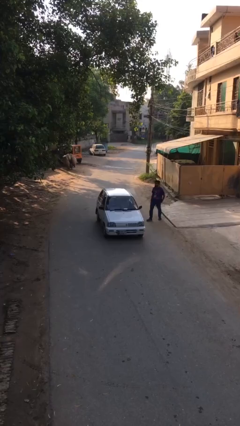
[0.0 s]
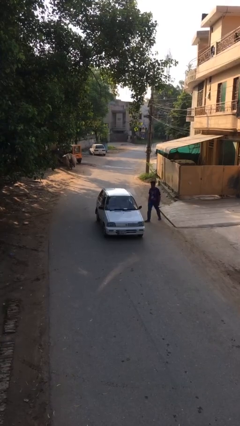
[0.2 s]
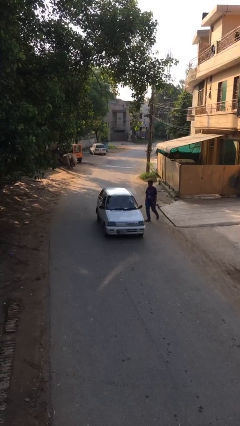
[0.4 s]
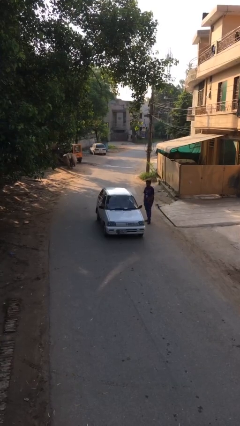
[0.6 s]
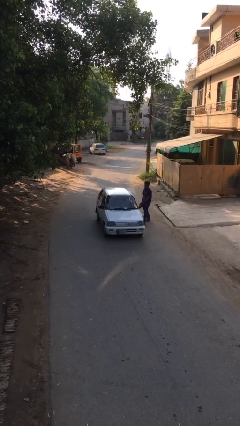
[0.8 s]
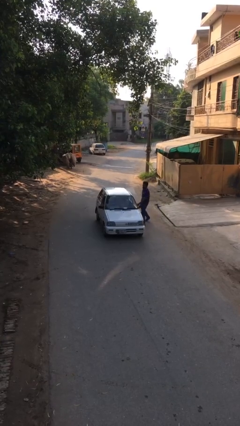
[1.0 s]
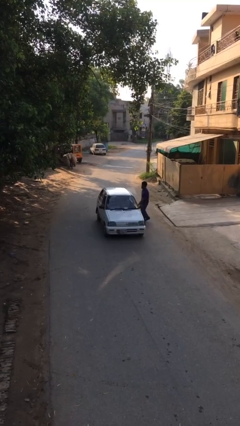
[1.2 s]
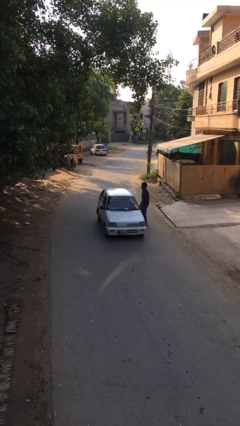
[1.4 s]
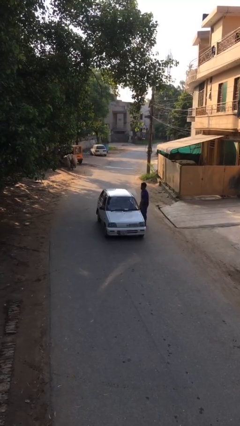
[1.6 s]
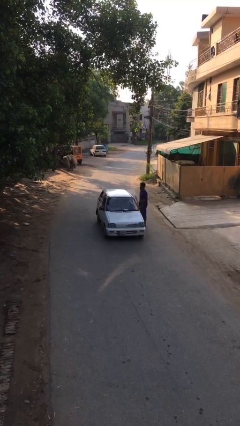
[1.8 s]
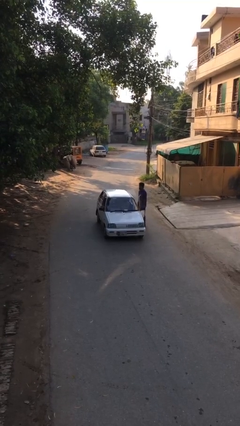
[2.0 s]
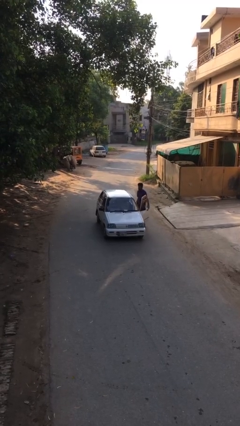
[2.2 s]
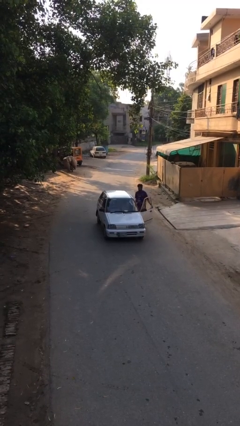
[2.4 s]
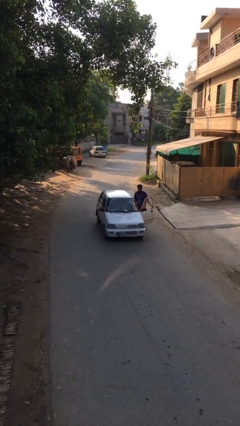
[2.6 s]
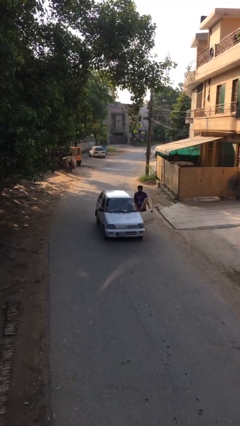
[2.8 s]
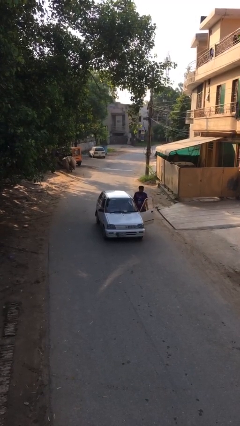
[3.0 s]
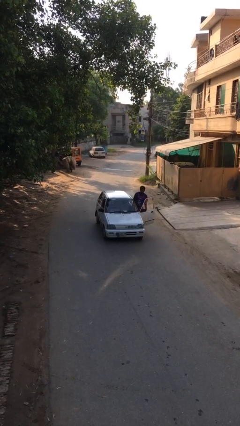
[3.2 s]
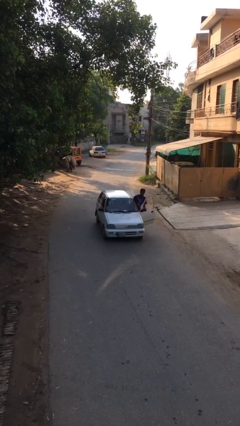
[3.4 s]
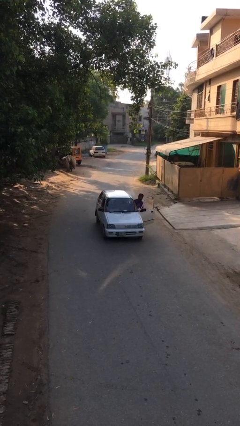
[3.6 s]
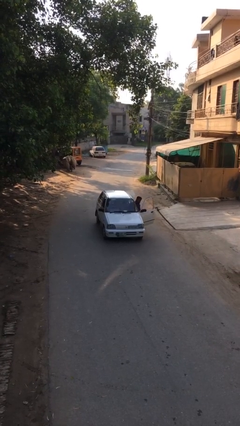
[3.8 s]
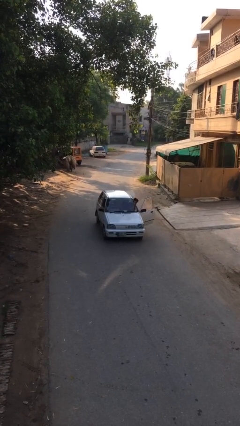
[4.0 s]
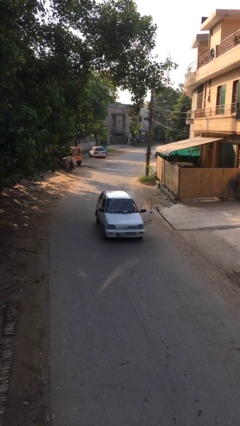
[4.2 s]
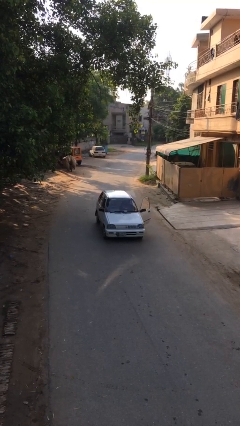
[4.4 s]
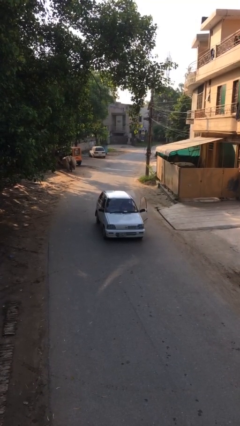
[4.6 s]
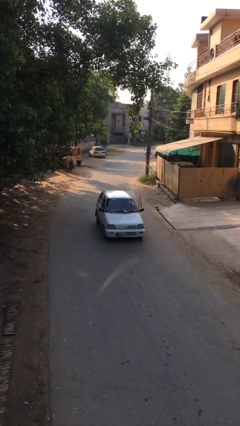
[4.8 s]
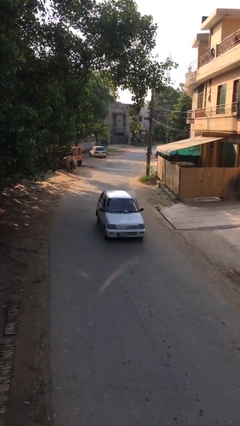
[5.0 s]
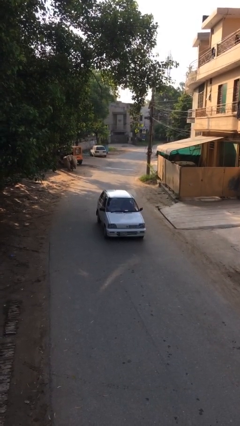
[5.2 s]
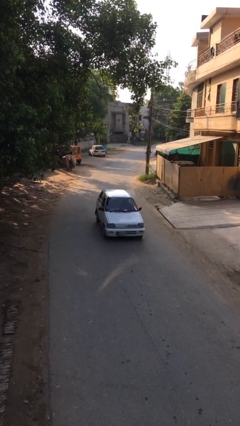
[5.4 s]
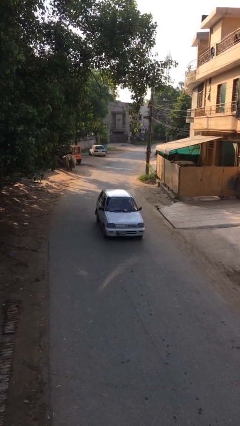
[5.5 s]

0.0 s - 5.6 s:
car picks up person

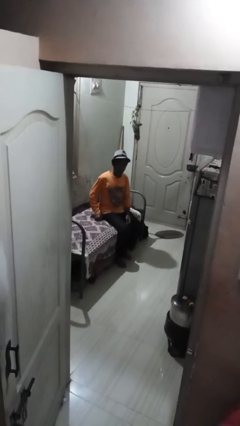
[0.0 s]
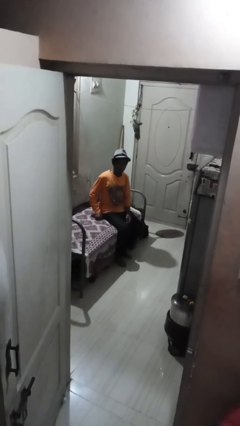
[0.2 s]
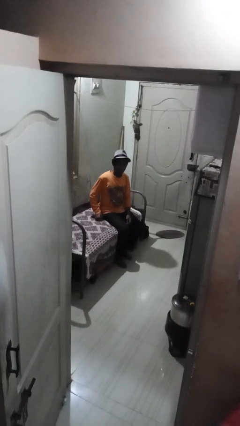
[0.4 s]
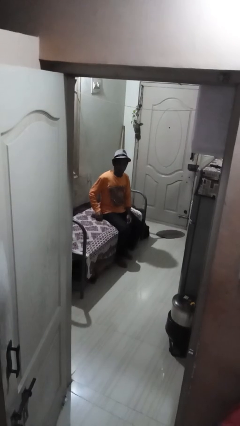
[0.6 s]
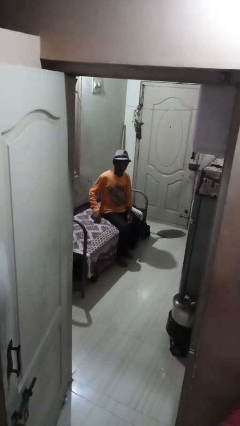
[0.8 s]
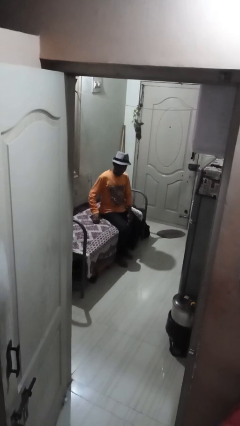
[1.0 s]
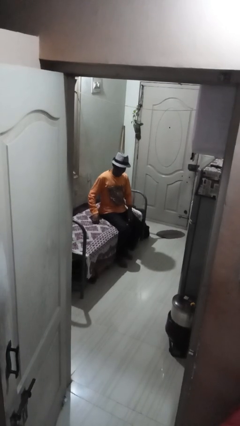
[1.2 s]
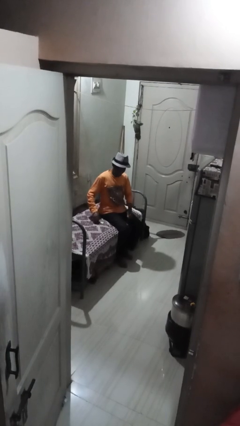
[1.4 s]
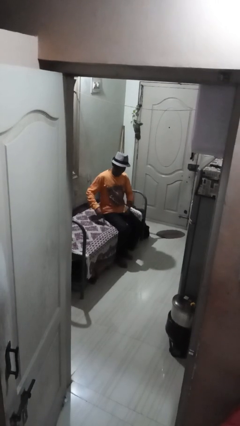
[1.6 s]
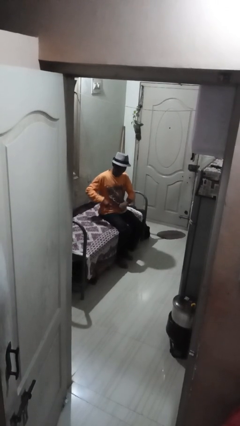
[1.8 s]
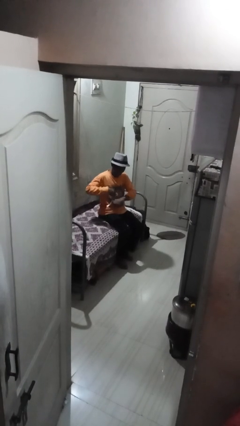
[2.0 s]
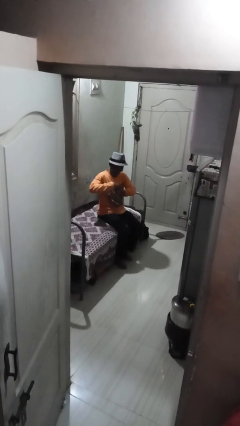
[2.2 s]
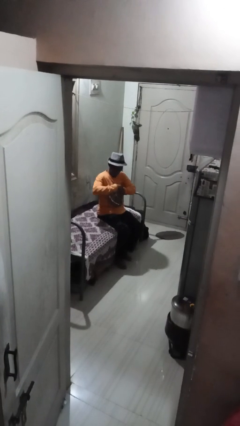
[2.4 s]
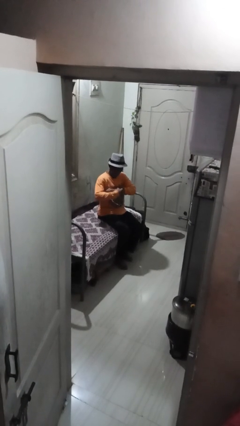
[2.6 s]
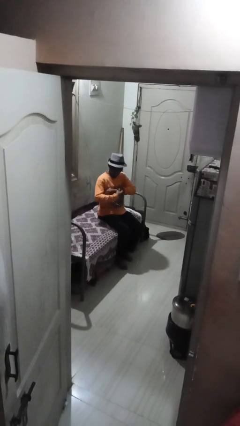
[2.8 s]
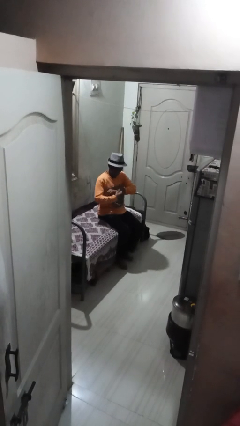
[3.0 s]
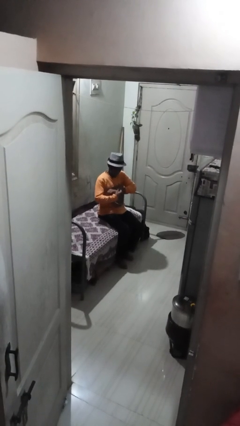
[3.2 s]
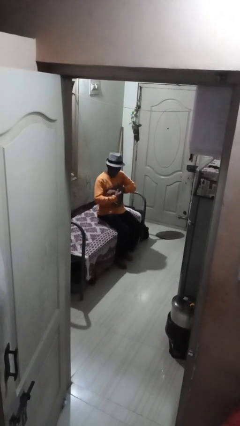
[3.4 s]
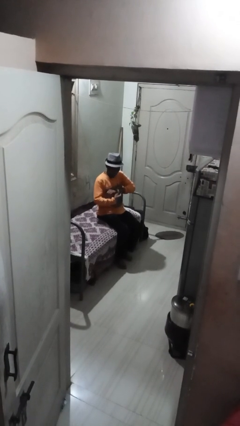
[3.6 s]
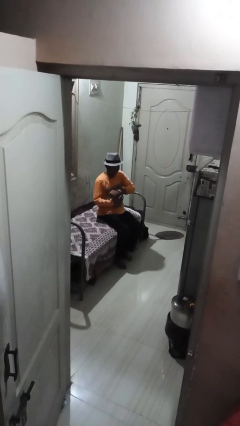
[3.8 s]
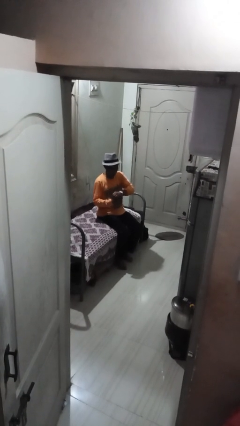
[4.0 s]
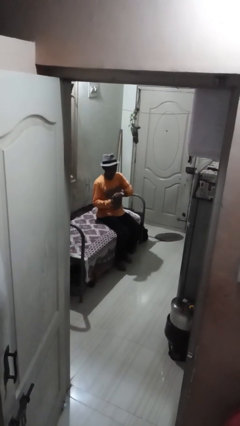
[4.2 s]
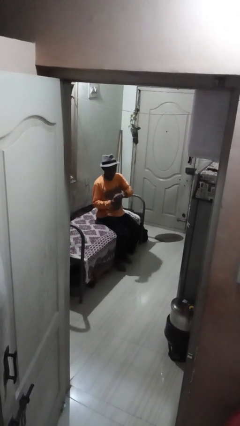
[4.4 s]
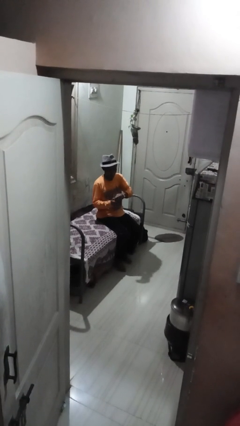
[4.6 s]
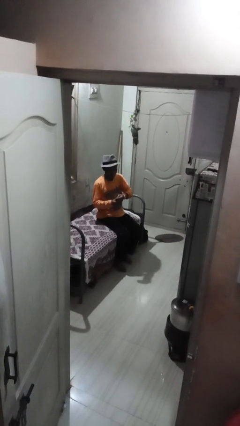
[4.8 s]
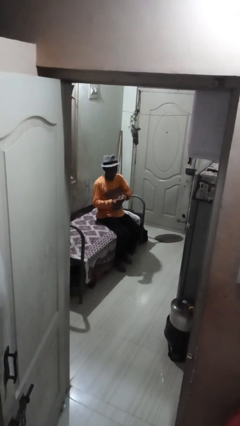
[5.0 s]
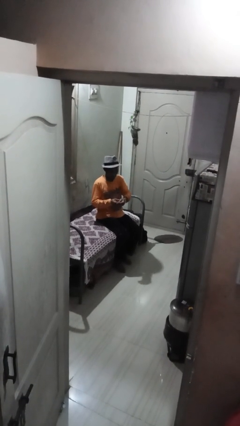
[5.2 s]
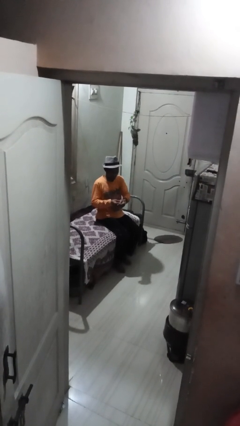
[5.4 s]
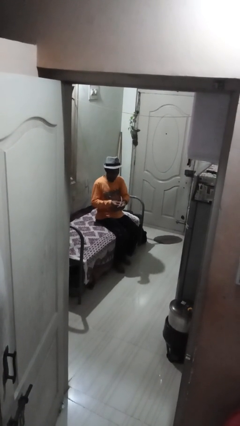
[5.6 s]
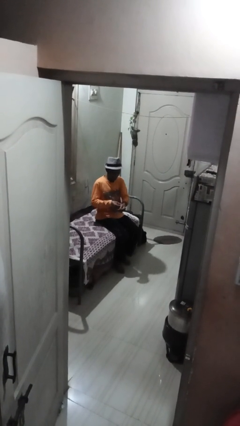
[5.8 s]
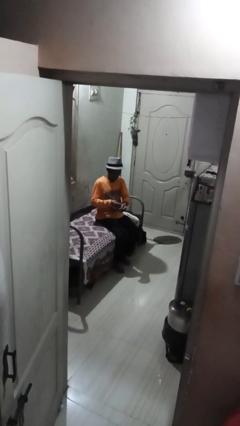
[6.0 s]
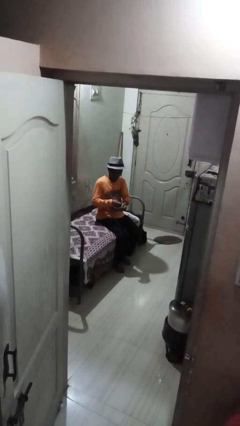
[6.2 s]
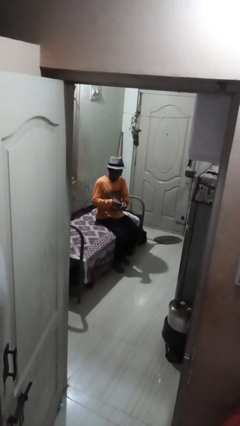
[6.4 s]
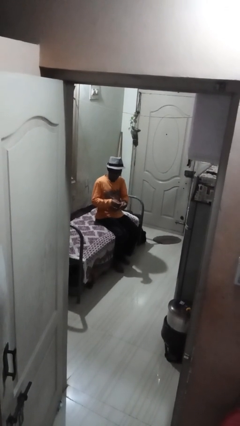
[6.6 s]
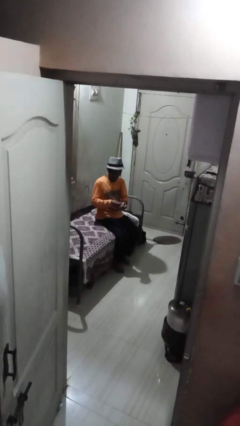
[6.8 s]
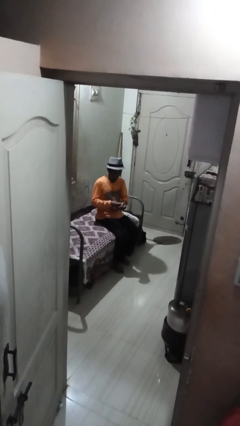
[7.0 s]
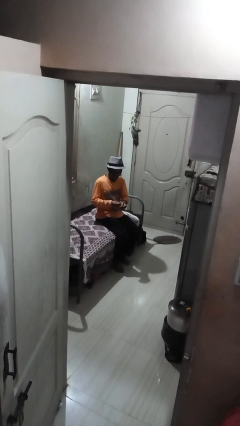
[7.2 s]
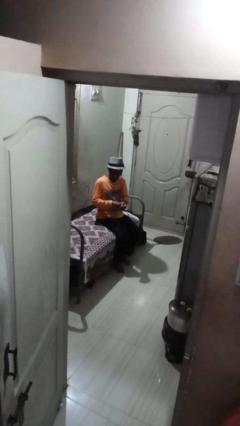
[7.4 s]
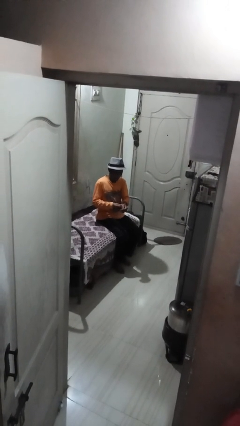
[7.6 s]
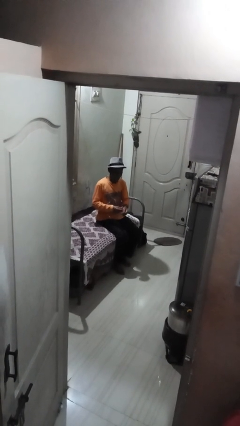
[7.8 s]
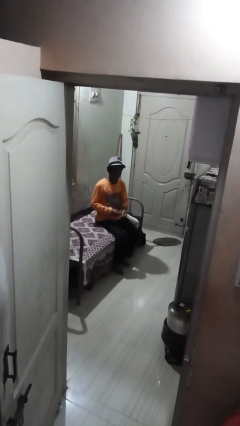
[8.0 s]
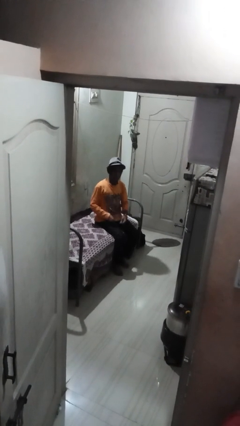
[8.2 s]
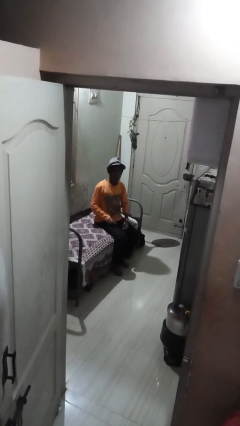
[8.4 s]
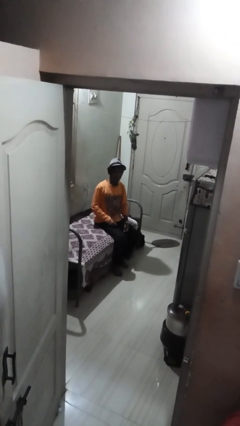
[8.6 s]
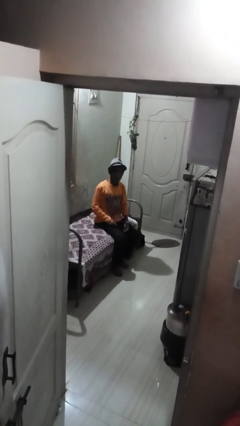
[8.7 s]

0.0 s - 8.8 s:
person puts on wristwatch

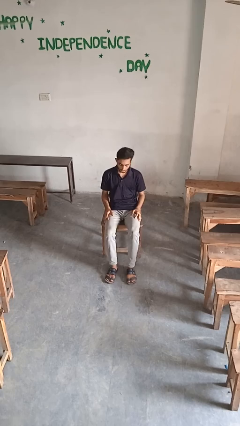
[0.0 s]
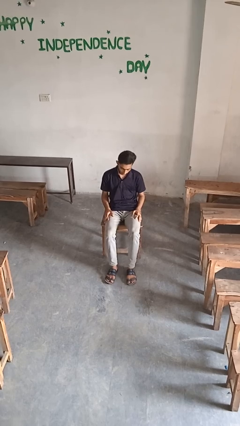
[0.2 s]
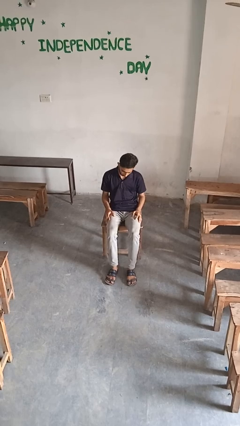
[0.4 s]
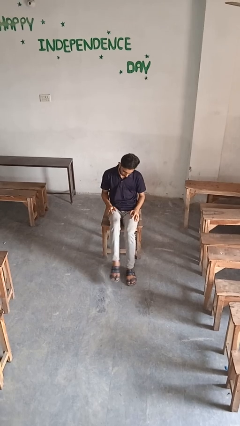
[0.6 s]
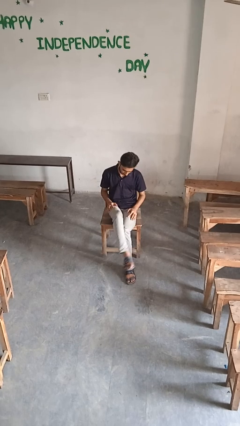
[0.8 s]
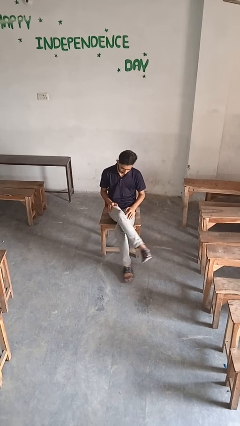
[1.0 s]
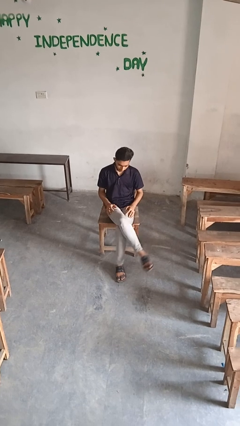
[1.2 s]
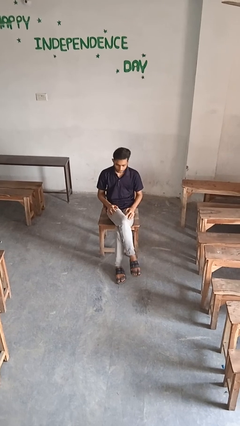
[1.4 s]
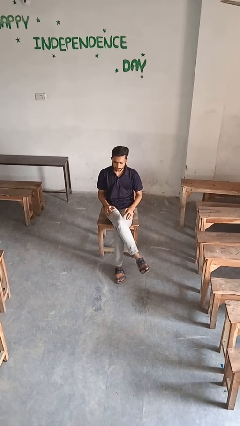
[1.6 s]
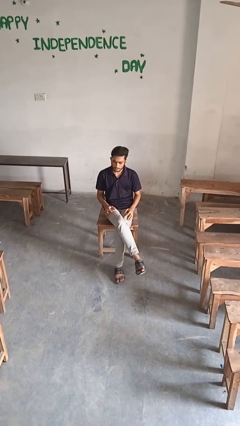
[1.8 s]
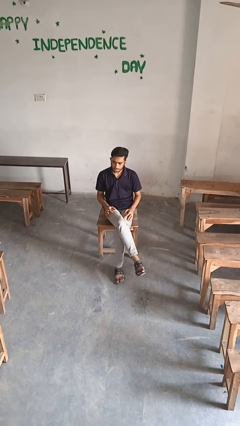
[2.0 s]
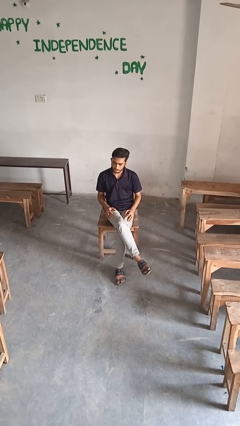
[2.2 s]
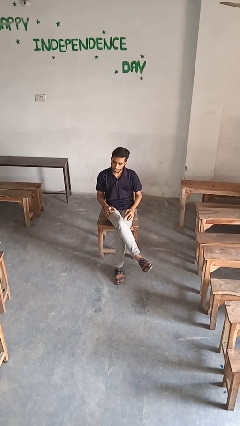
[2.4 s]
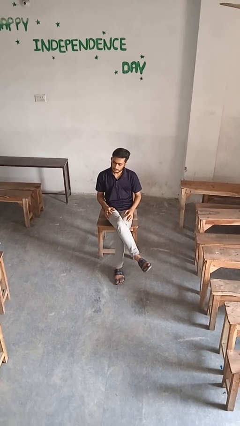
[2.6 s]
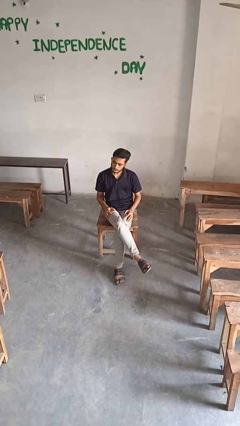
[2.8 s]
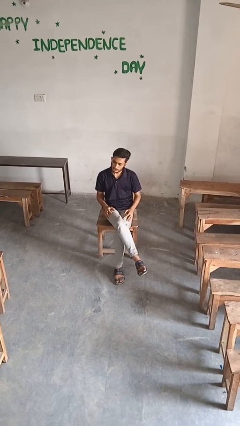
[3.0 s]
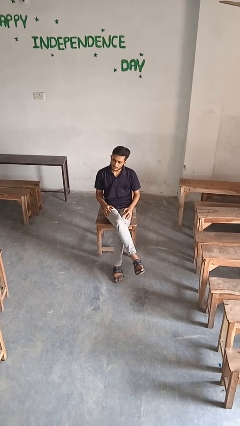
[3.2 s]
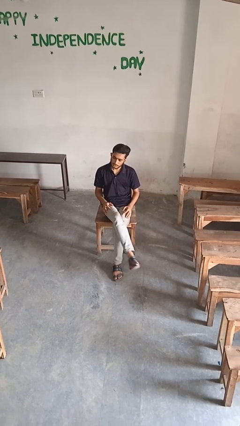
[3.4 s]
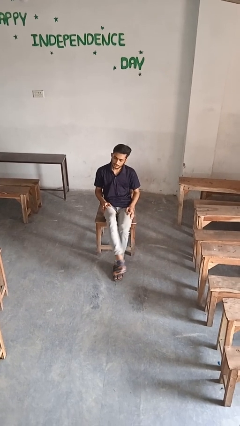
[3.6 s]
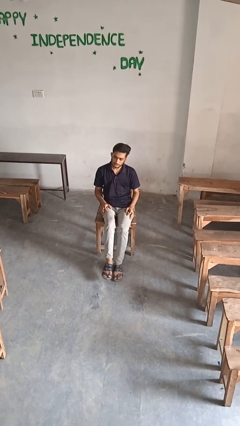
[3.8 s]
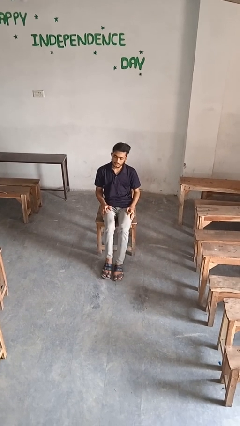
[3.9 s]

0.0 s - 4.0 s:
person crosses legs
